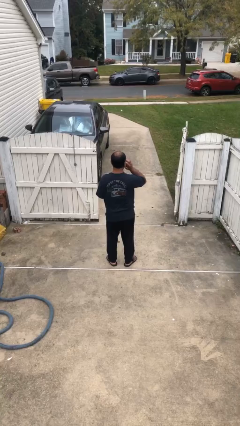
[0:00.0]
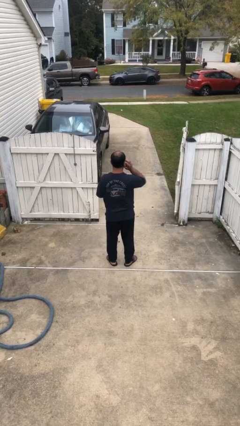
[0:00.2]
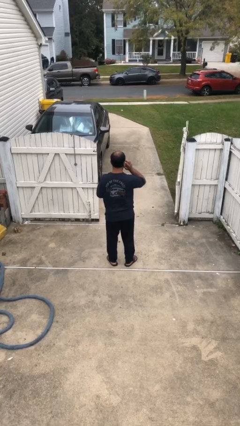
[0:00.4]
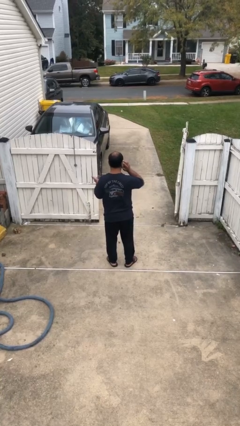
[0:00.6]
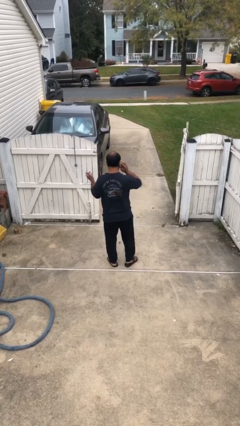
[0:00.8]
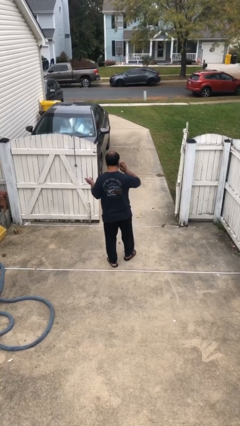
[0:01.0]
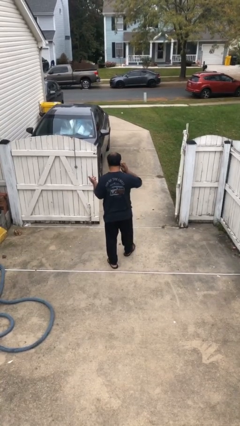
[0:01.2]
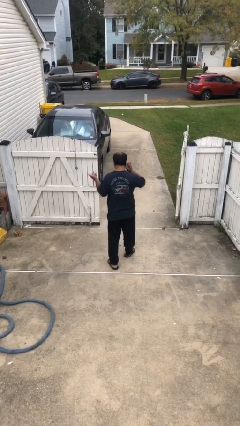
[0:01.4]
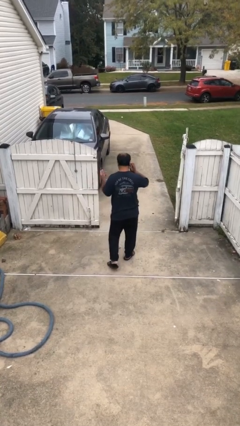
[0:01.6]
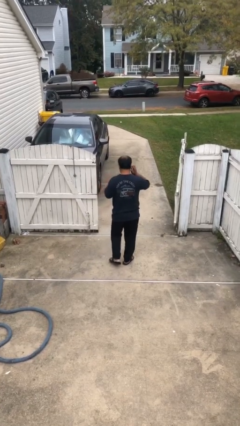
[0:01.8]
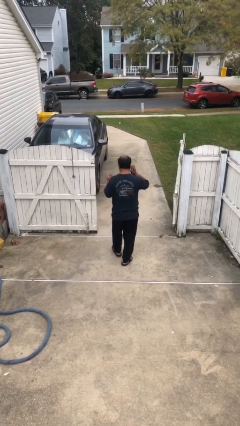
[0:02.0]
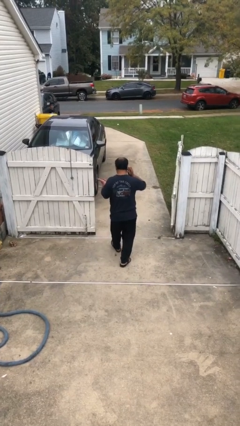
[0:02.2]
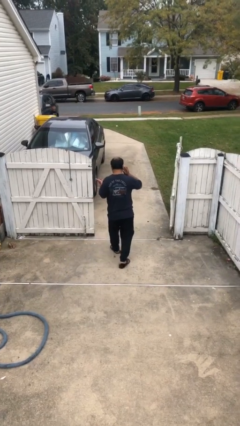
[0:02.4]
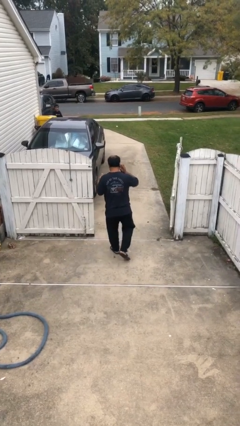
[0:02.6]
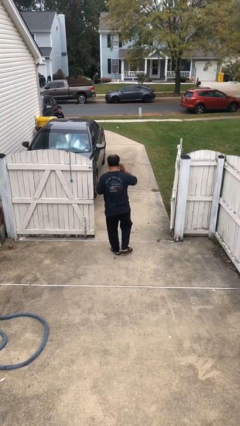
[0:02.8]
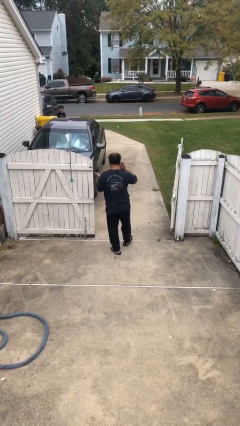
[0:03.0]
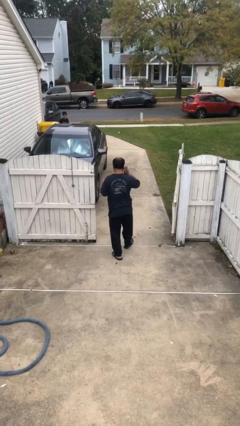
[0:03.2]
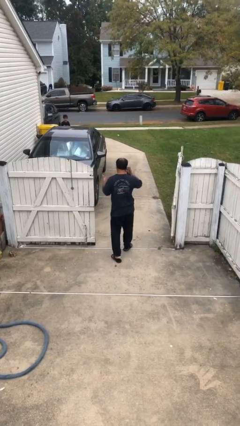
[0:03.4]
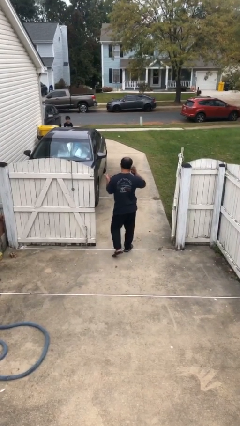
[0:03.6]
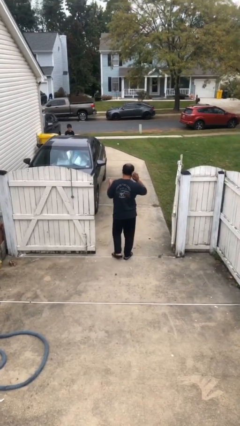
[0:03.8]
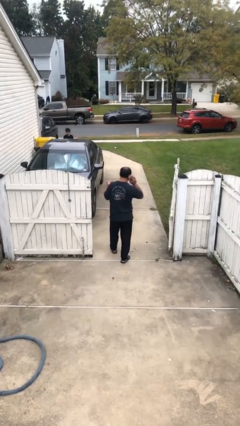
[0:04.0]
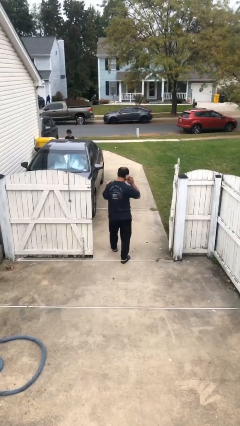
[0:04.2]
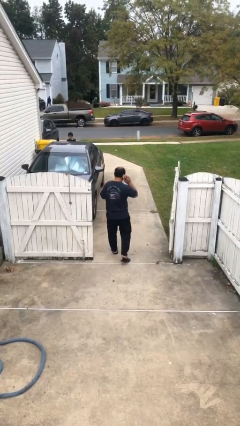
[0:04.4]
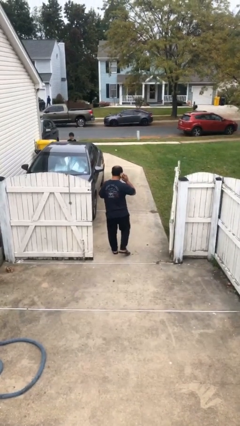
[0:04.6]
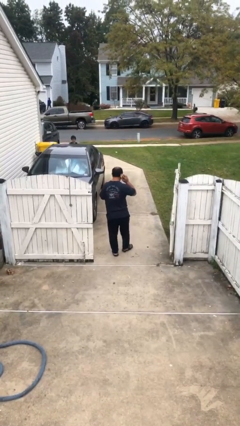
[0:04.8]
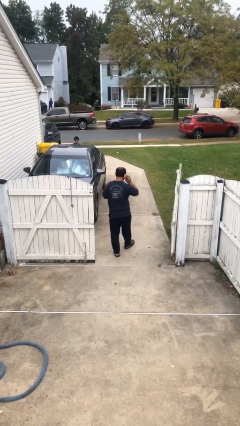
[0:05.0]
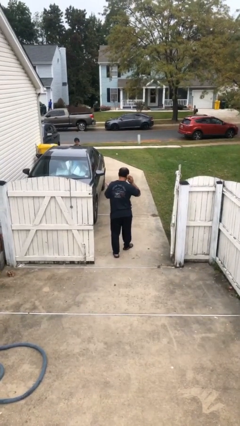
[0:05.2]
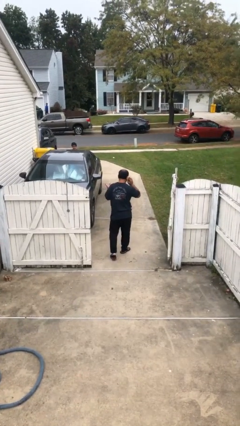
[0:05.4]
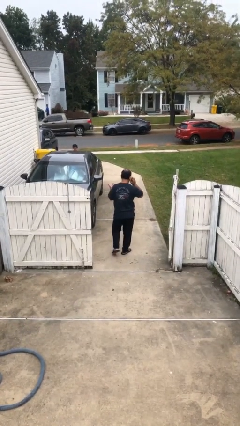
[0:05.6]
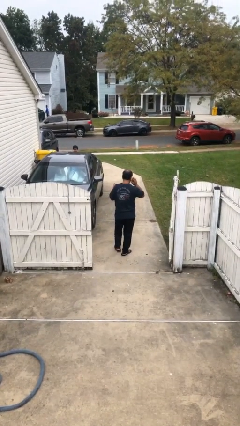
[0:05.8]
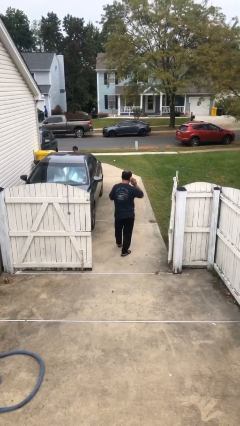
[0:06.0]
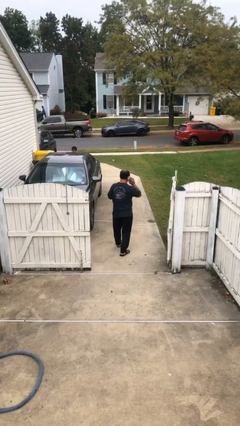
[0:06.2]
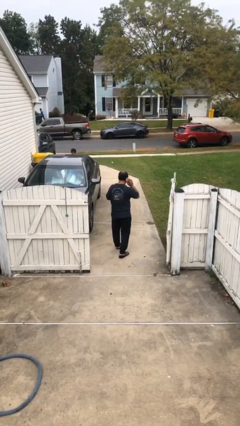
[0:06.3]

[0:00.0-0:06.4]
person exits scene through structure

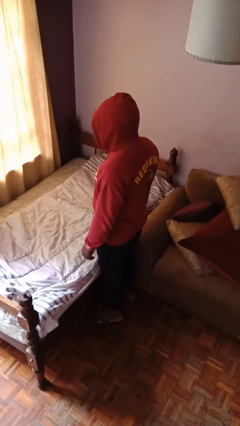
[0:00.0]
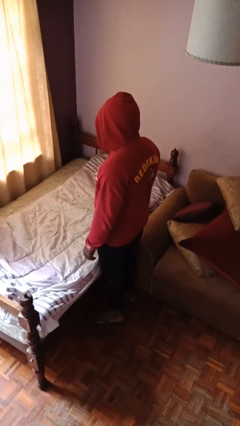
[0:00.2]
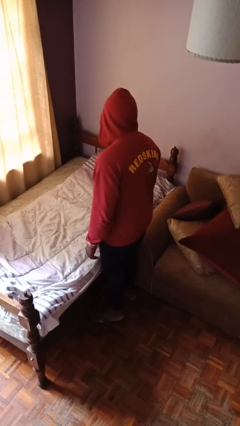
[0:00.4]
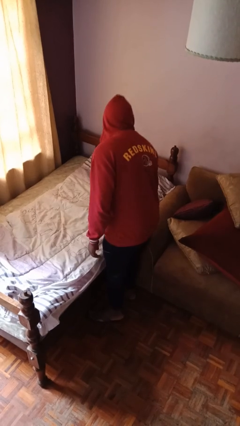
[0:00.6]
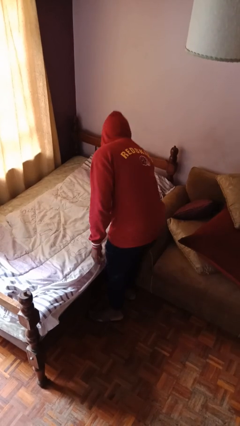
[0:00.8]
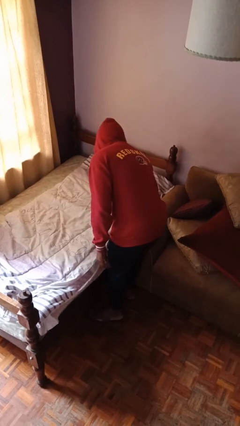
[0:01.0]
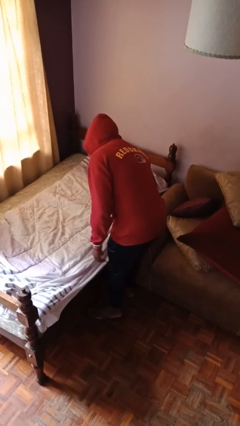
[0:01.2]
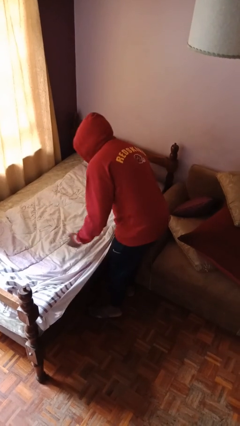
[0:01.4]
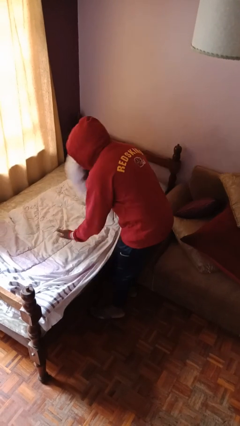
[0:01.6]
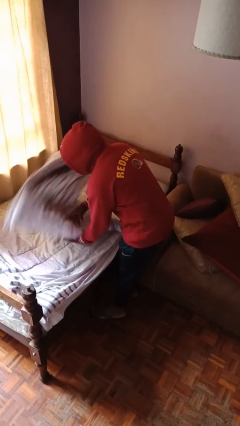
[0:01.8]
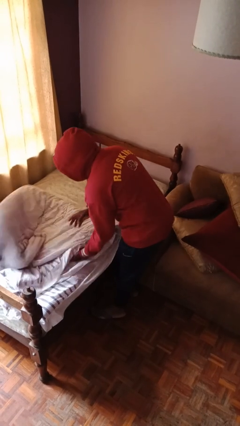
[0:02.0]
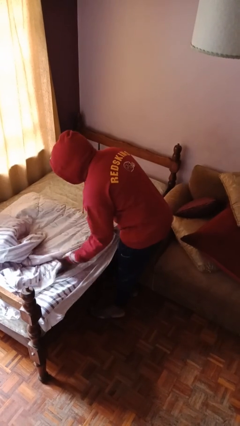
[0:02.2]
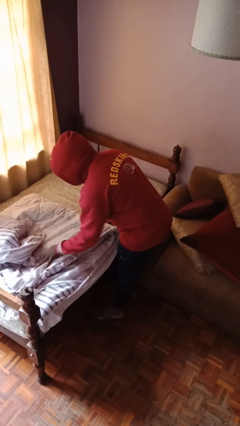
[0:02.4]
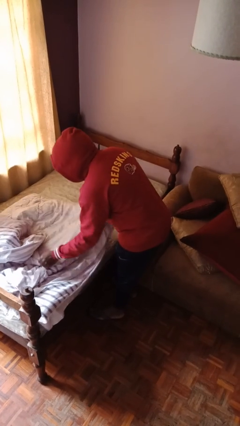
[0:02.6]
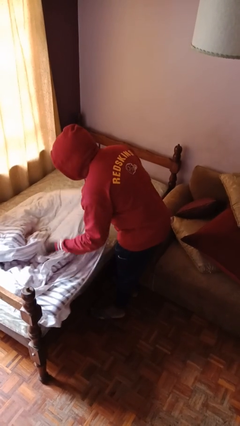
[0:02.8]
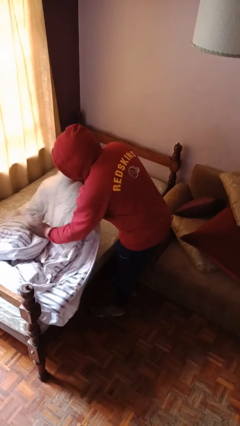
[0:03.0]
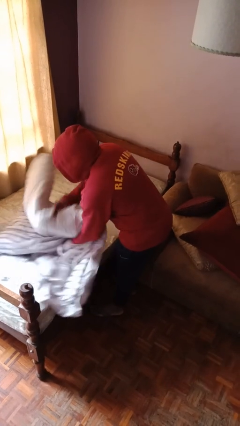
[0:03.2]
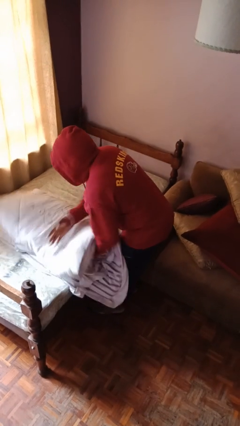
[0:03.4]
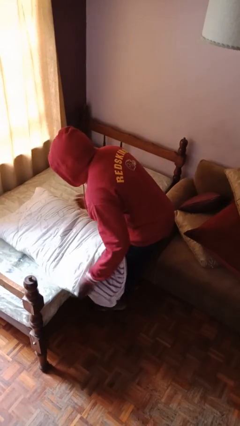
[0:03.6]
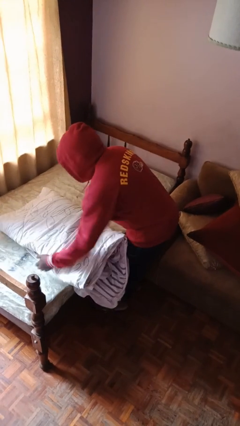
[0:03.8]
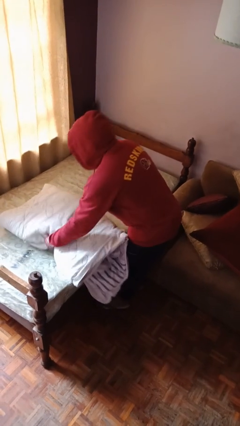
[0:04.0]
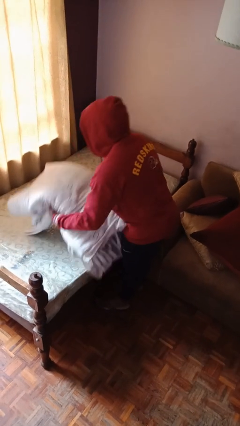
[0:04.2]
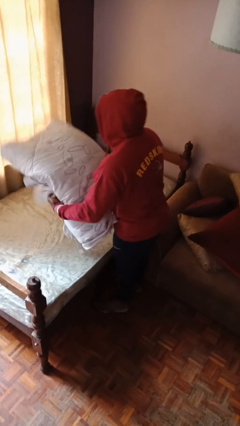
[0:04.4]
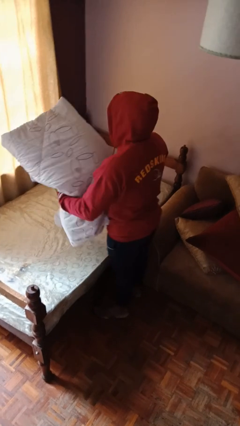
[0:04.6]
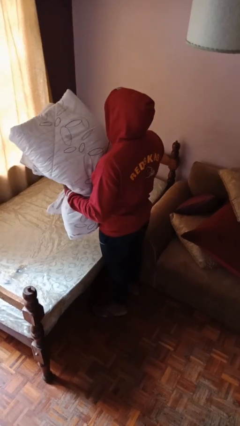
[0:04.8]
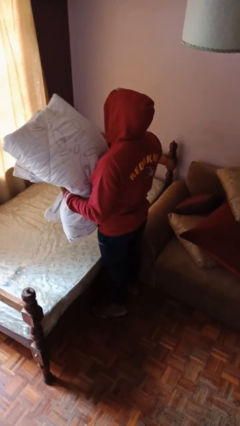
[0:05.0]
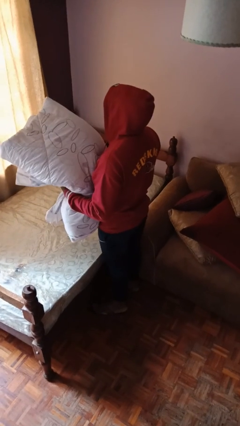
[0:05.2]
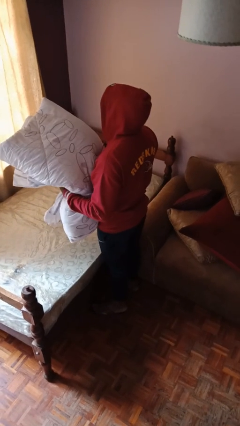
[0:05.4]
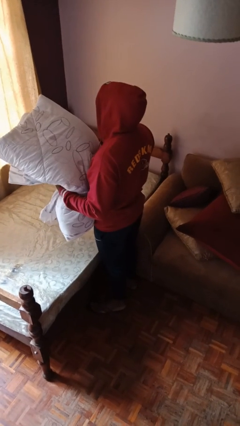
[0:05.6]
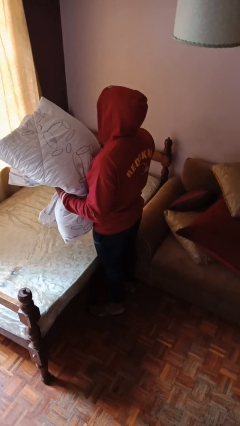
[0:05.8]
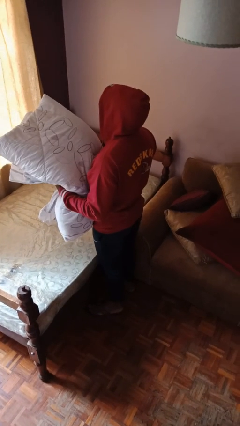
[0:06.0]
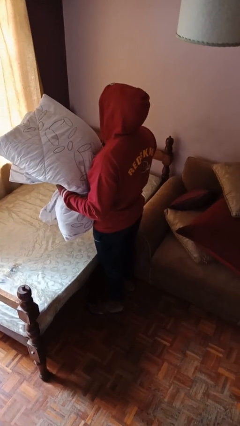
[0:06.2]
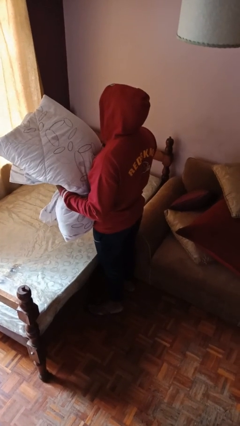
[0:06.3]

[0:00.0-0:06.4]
person folds blanket

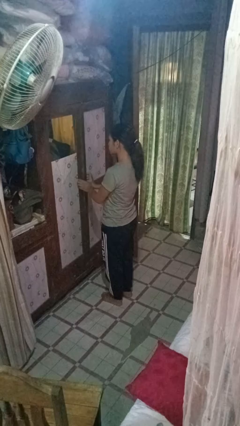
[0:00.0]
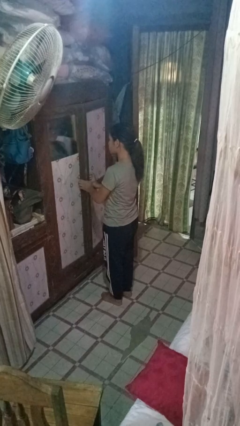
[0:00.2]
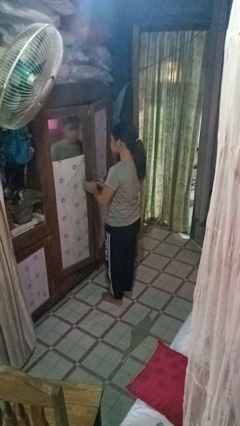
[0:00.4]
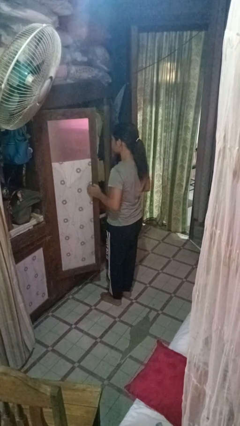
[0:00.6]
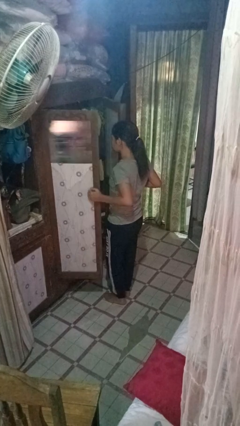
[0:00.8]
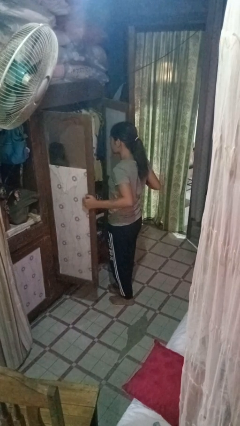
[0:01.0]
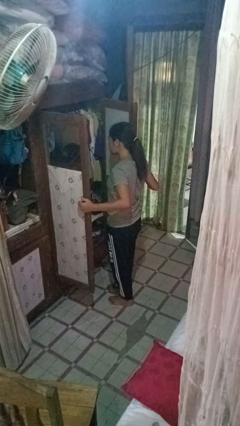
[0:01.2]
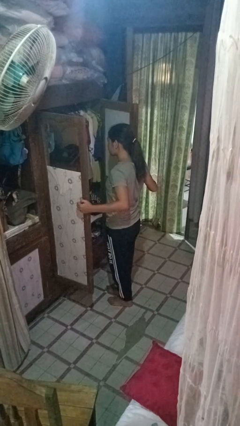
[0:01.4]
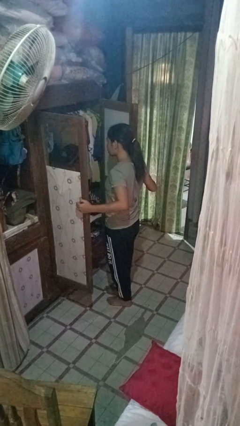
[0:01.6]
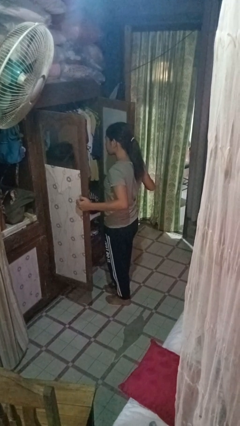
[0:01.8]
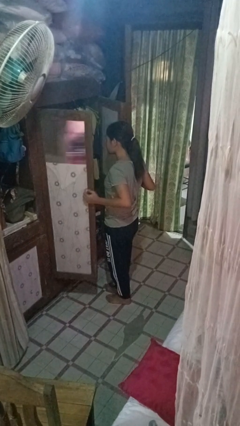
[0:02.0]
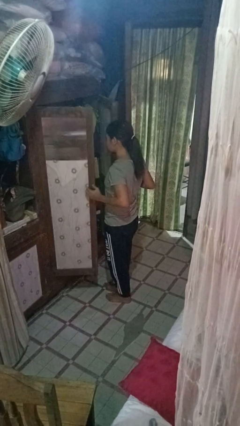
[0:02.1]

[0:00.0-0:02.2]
person opens closet door

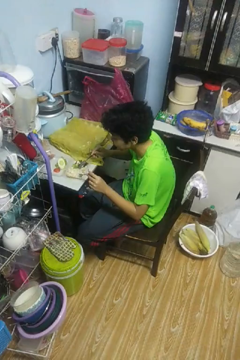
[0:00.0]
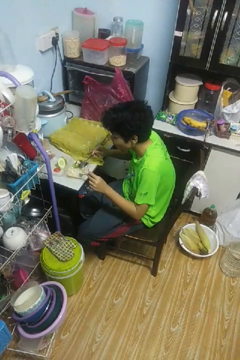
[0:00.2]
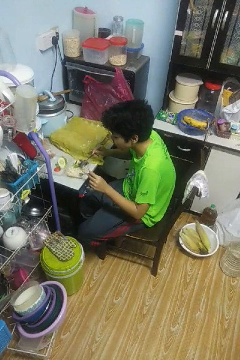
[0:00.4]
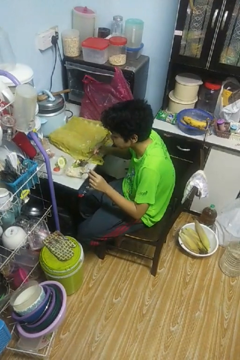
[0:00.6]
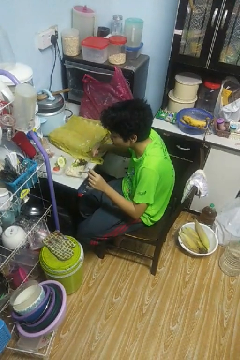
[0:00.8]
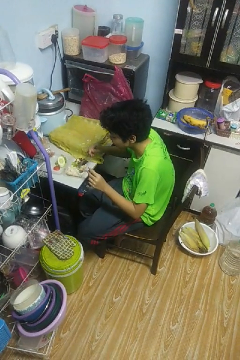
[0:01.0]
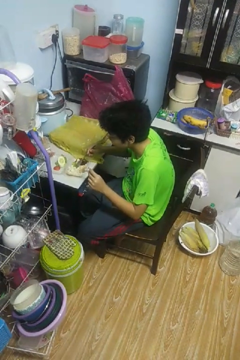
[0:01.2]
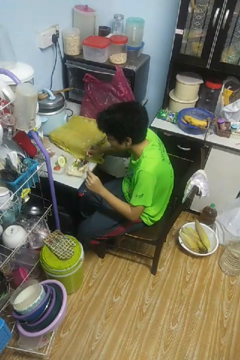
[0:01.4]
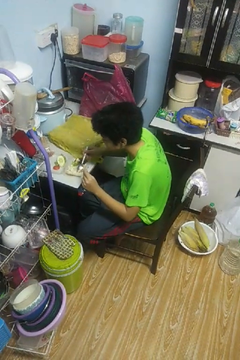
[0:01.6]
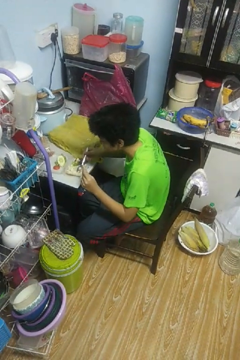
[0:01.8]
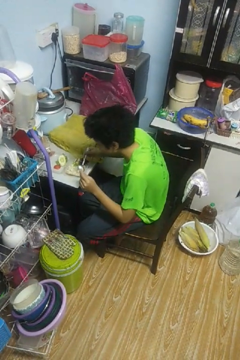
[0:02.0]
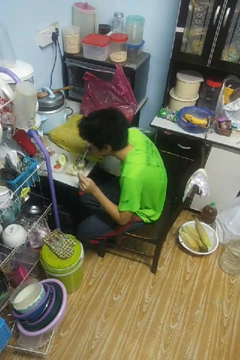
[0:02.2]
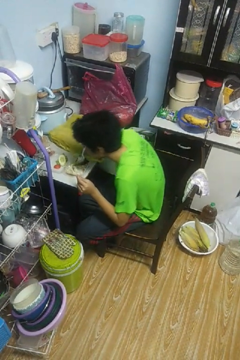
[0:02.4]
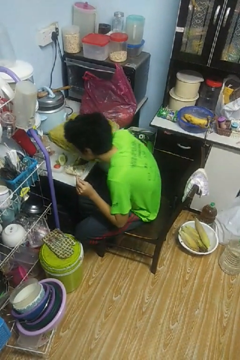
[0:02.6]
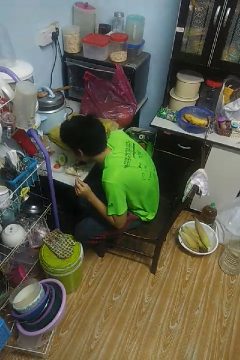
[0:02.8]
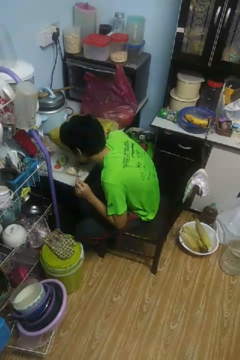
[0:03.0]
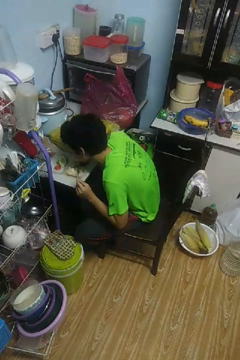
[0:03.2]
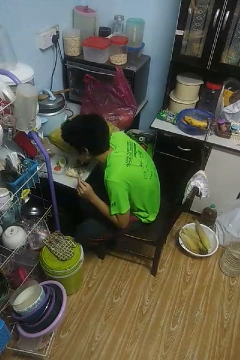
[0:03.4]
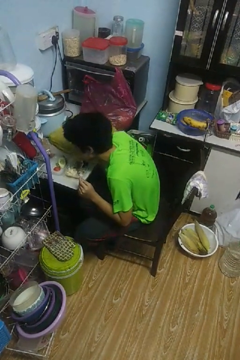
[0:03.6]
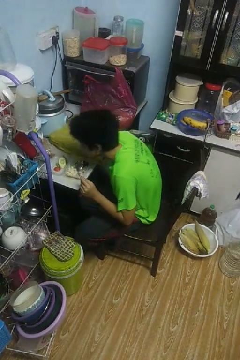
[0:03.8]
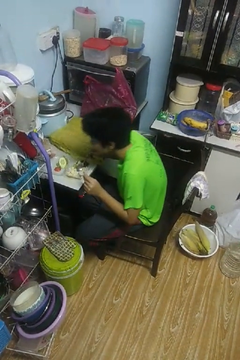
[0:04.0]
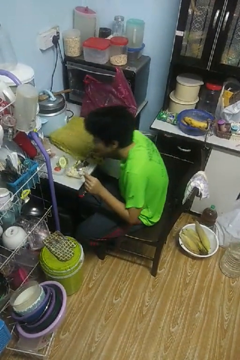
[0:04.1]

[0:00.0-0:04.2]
person eats with utensil
